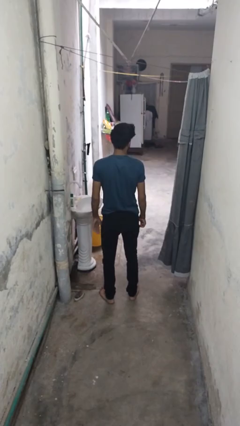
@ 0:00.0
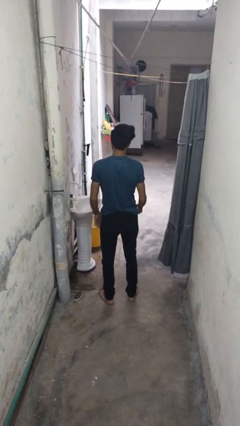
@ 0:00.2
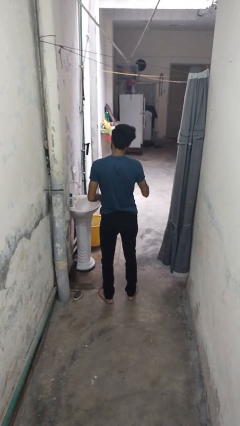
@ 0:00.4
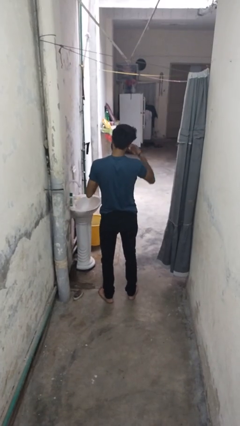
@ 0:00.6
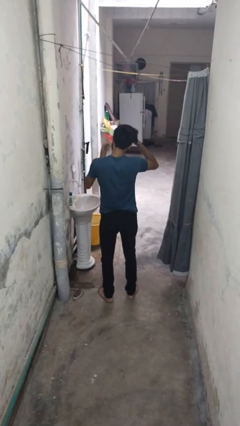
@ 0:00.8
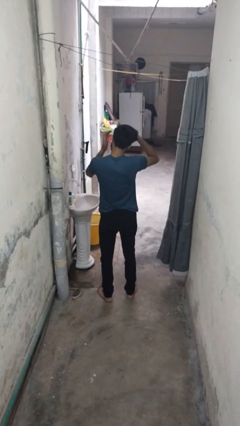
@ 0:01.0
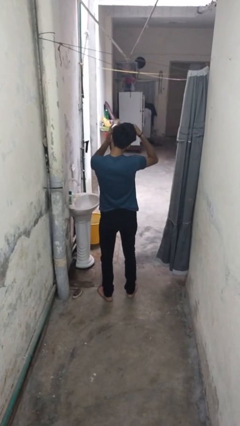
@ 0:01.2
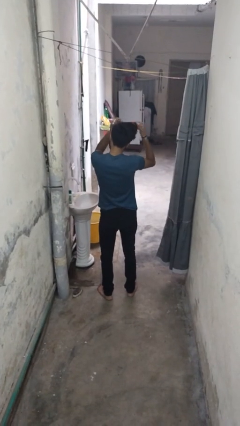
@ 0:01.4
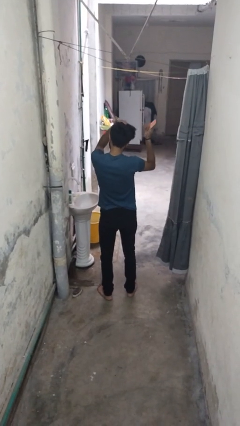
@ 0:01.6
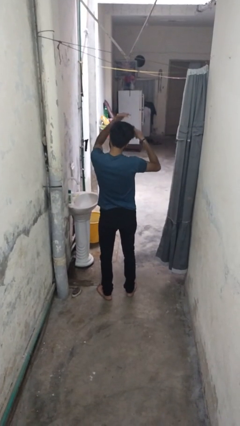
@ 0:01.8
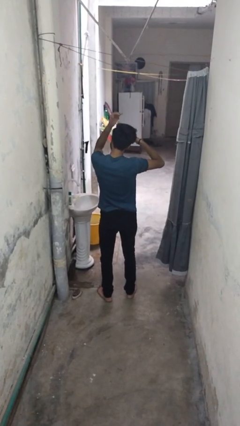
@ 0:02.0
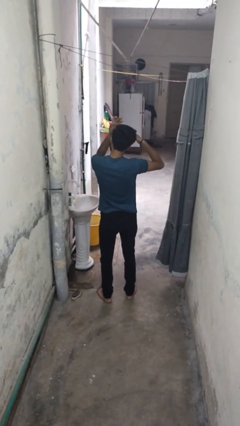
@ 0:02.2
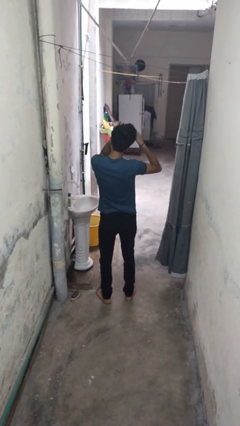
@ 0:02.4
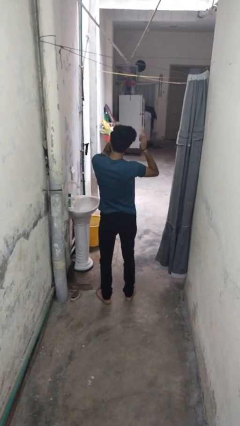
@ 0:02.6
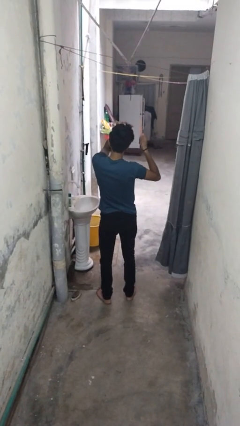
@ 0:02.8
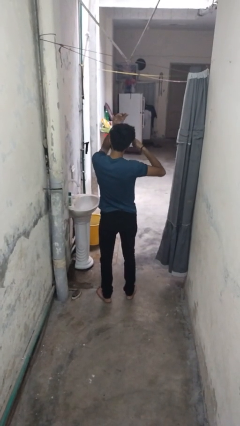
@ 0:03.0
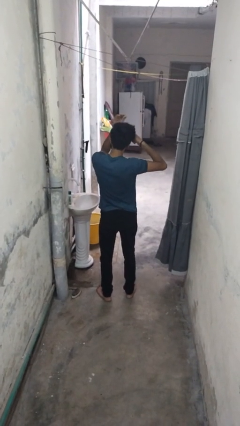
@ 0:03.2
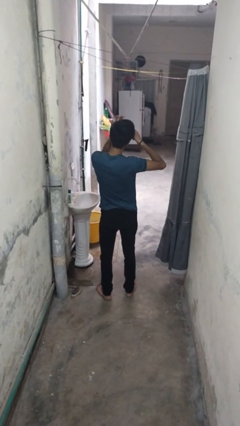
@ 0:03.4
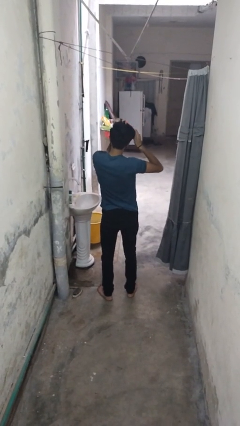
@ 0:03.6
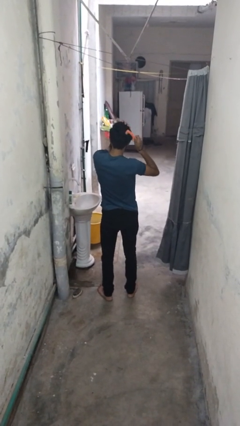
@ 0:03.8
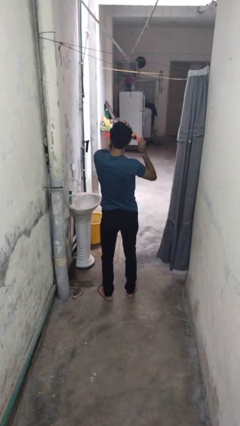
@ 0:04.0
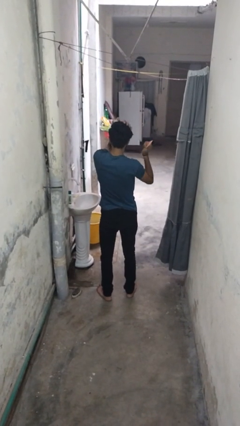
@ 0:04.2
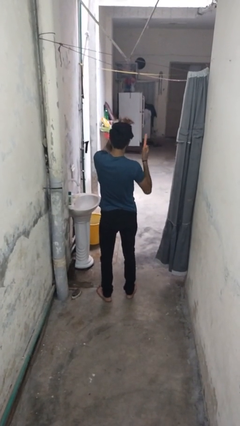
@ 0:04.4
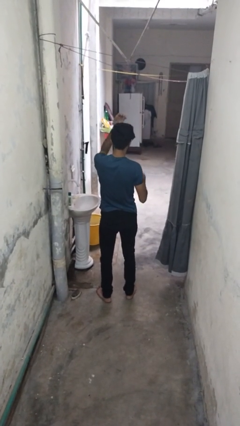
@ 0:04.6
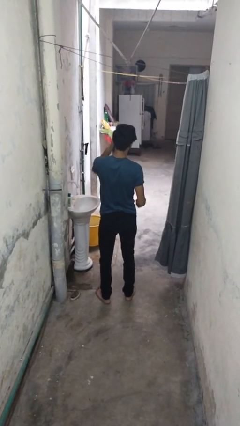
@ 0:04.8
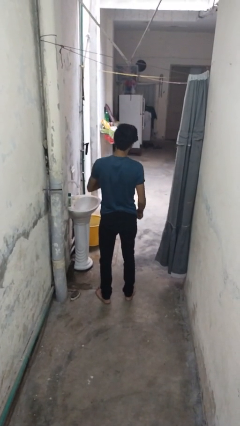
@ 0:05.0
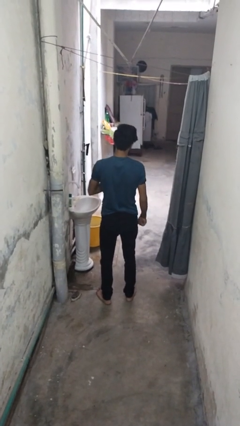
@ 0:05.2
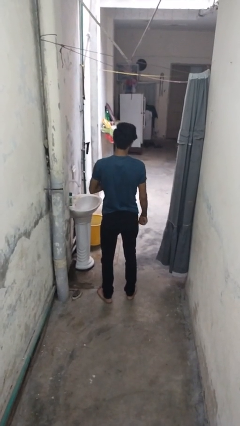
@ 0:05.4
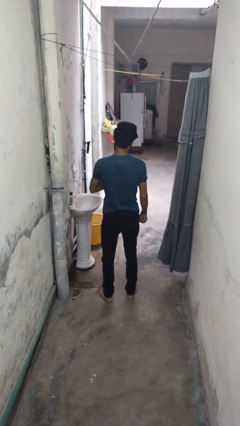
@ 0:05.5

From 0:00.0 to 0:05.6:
person brushes hair

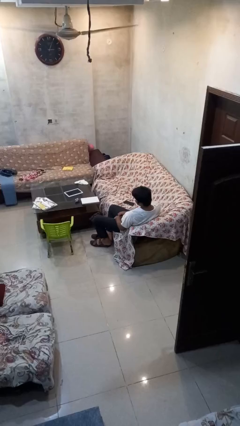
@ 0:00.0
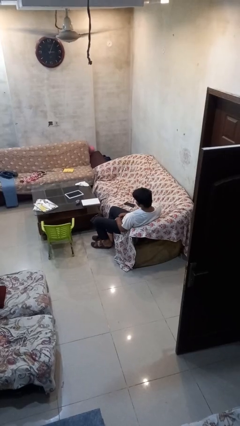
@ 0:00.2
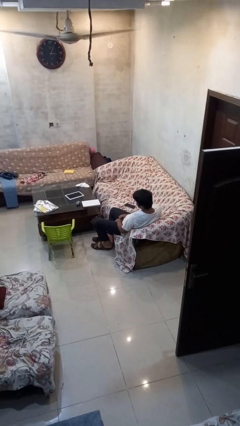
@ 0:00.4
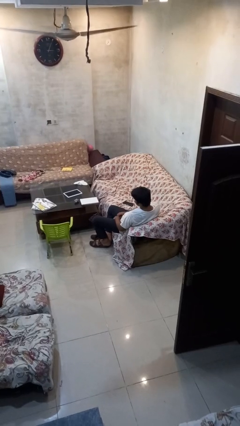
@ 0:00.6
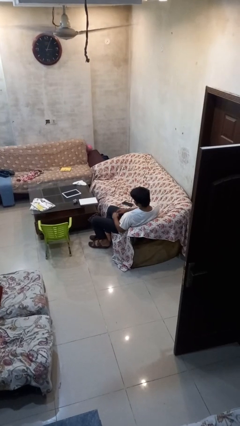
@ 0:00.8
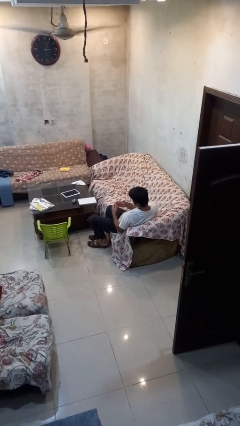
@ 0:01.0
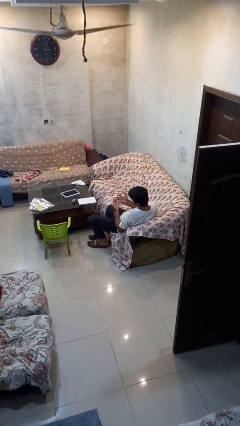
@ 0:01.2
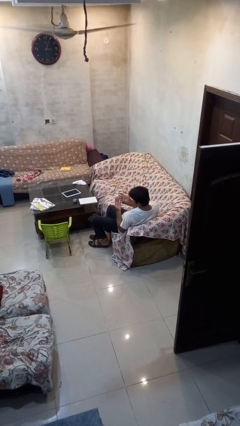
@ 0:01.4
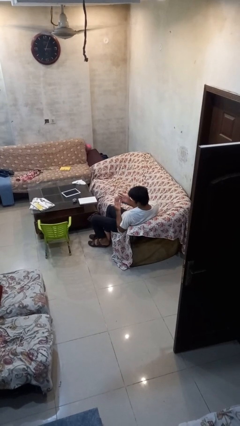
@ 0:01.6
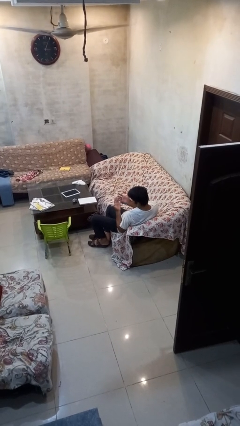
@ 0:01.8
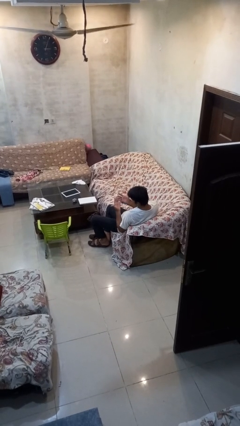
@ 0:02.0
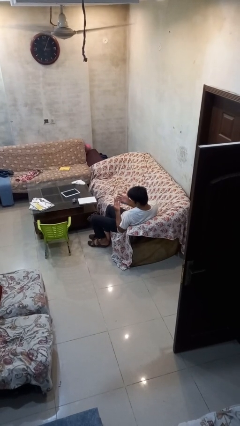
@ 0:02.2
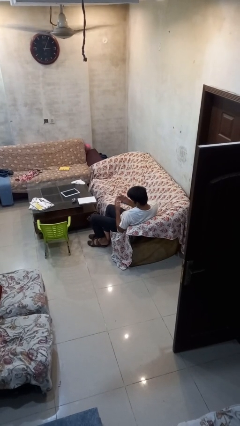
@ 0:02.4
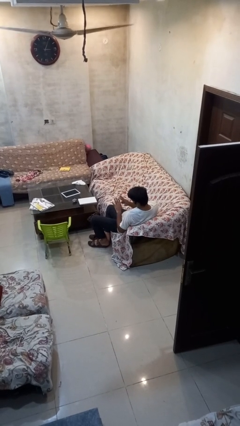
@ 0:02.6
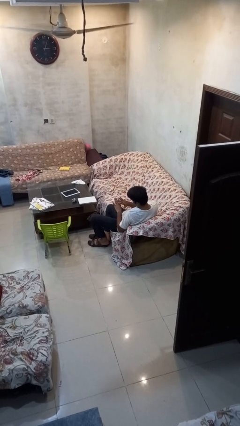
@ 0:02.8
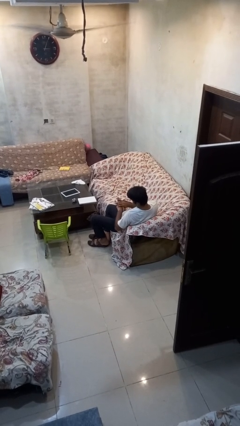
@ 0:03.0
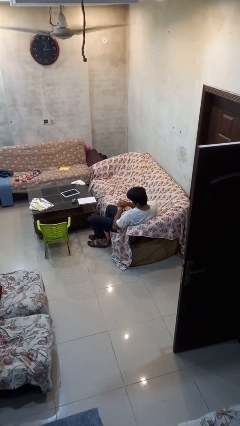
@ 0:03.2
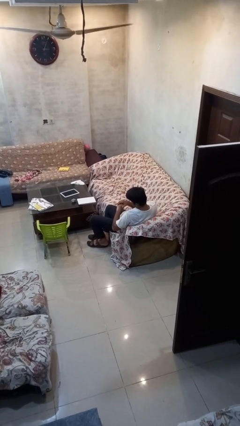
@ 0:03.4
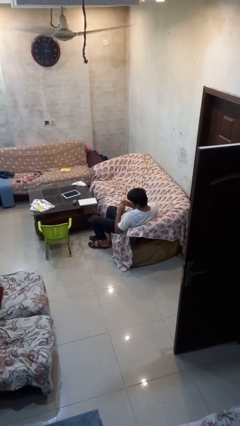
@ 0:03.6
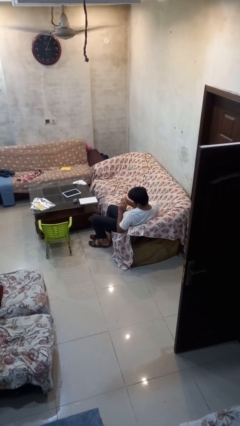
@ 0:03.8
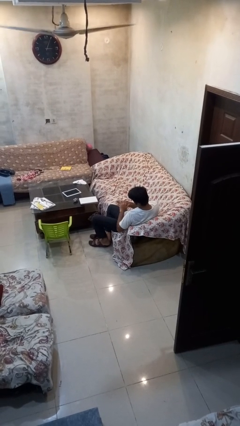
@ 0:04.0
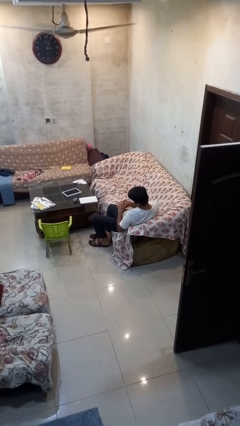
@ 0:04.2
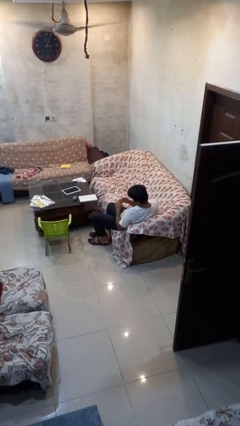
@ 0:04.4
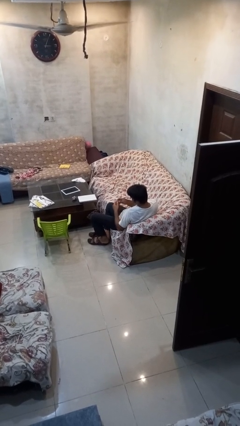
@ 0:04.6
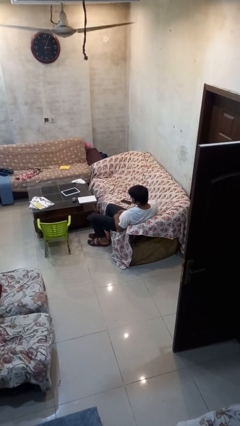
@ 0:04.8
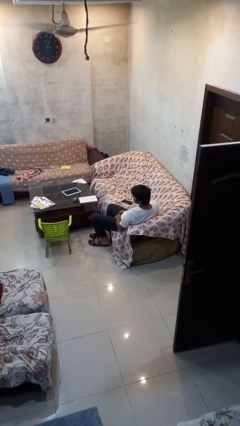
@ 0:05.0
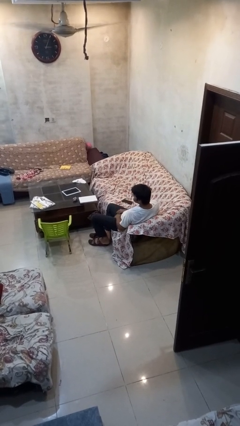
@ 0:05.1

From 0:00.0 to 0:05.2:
person looks at hands in lap

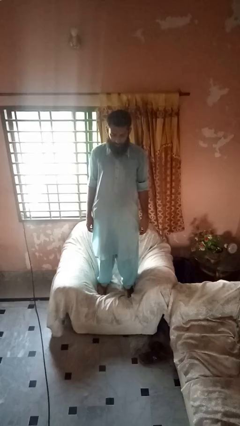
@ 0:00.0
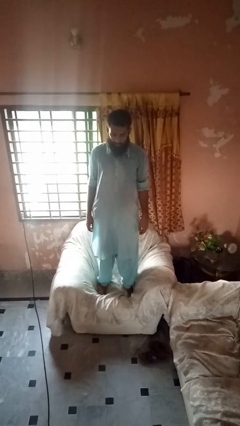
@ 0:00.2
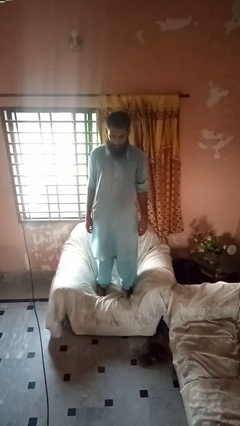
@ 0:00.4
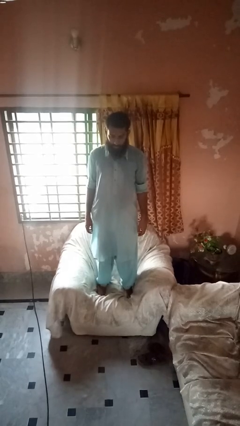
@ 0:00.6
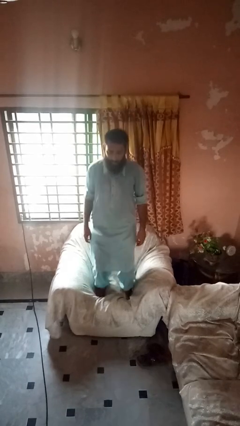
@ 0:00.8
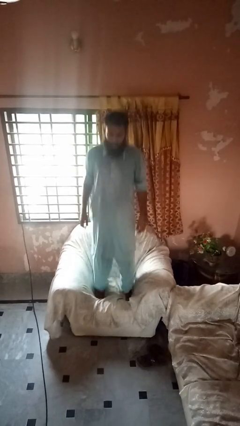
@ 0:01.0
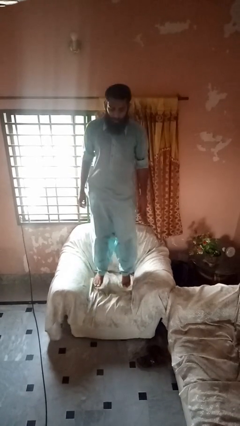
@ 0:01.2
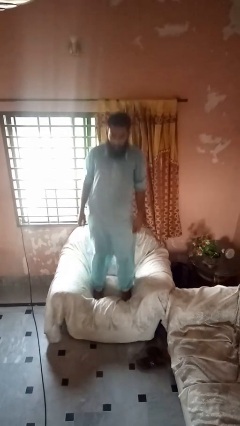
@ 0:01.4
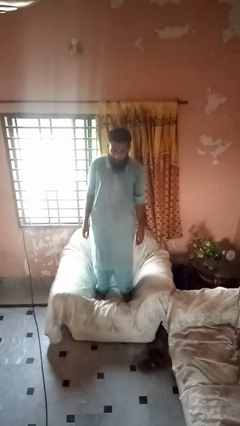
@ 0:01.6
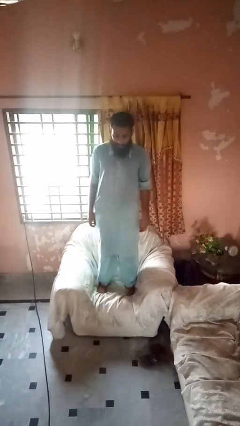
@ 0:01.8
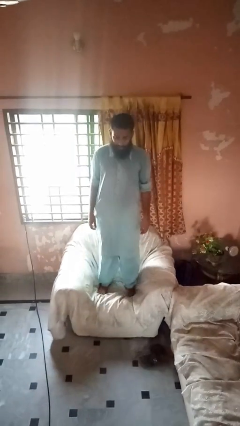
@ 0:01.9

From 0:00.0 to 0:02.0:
person jumps on couch

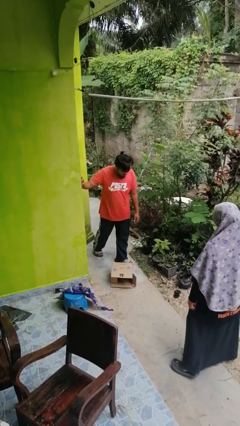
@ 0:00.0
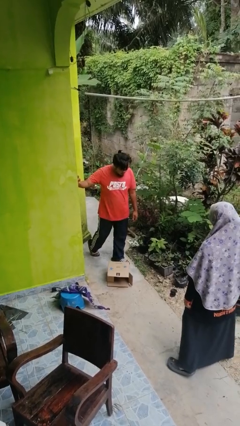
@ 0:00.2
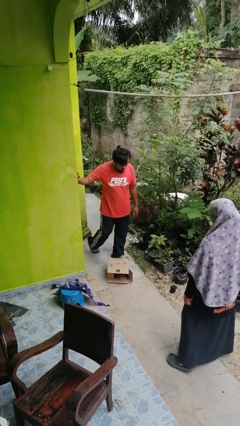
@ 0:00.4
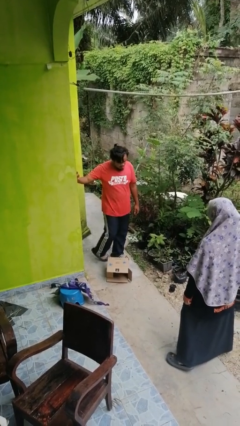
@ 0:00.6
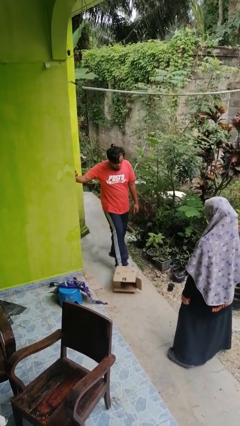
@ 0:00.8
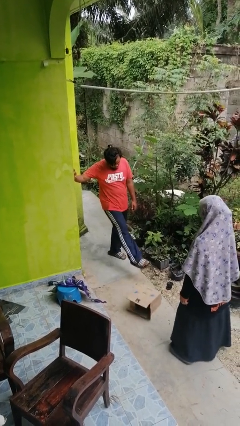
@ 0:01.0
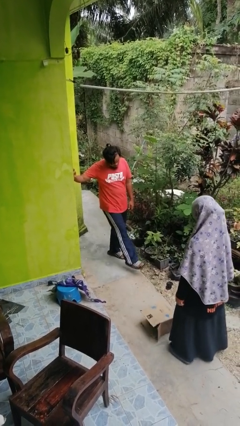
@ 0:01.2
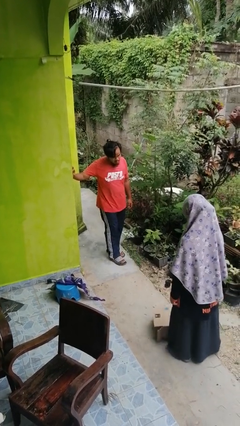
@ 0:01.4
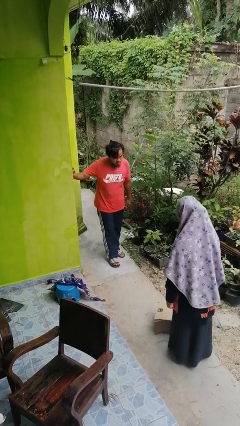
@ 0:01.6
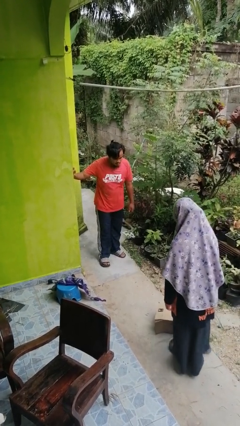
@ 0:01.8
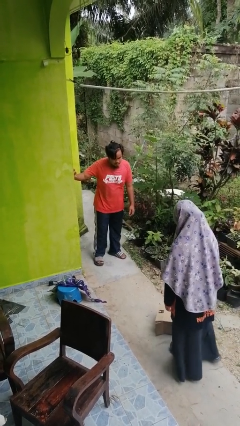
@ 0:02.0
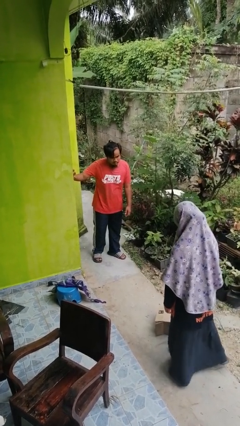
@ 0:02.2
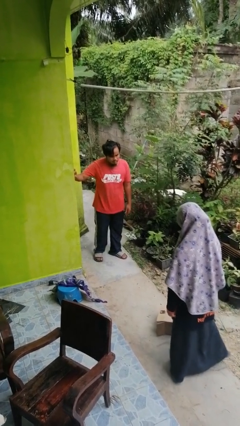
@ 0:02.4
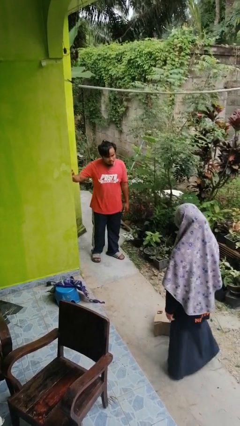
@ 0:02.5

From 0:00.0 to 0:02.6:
person kicks object to person

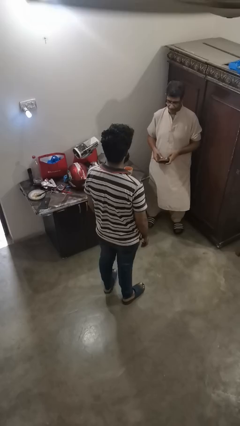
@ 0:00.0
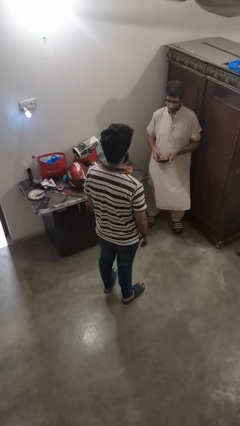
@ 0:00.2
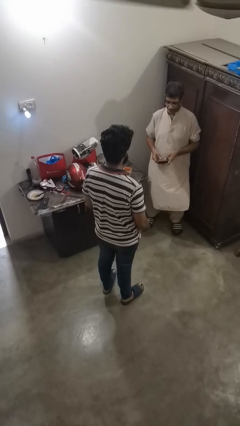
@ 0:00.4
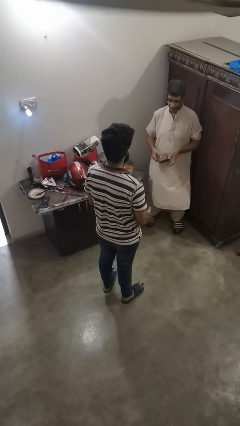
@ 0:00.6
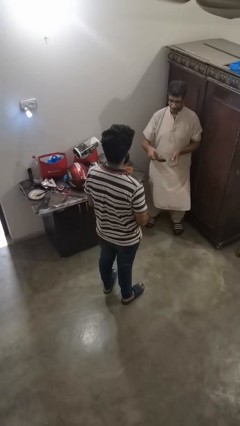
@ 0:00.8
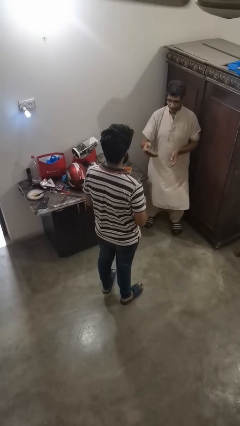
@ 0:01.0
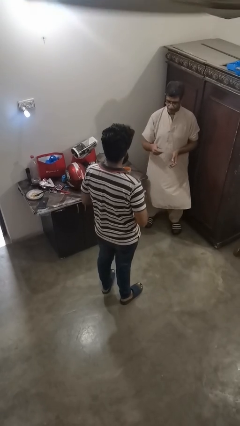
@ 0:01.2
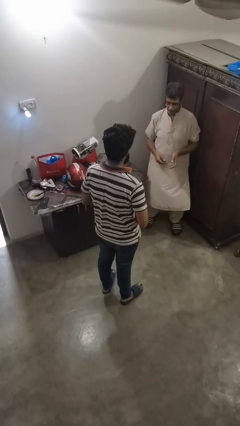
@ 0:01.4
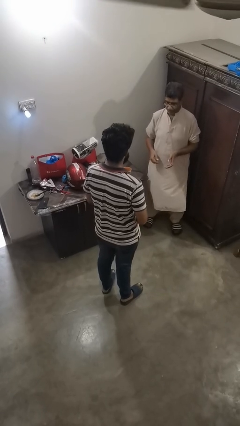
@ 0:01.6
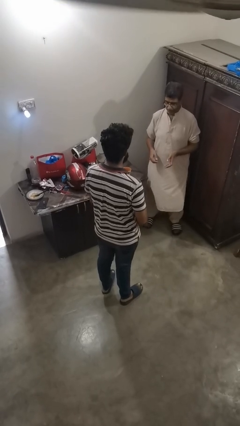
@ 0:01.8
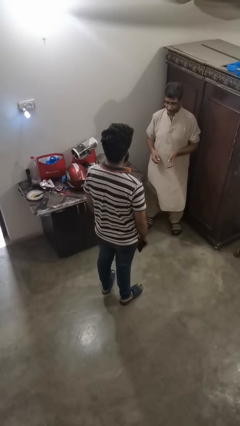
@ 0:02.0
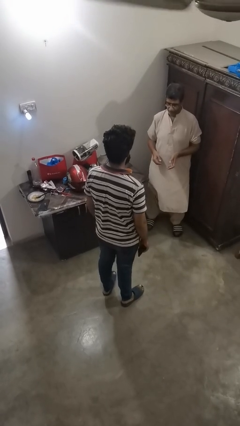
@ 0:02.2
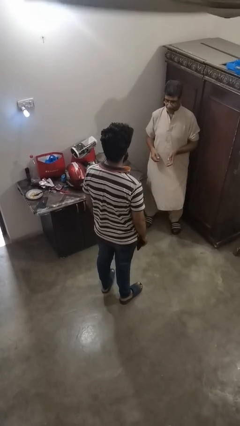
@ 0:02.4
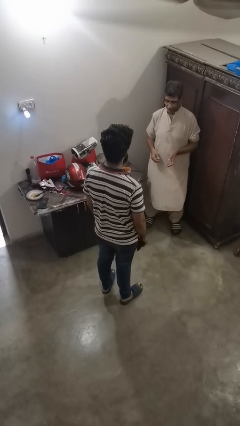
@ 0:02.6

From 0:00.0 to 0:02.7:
person catches object from person
